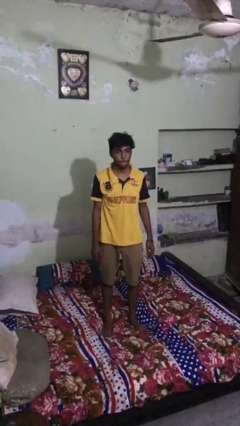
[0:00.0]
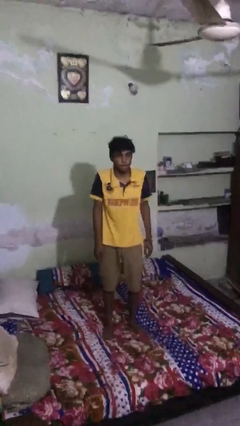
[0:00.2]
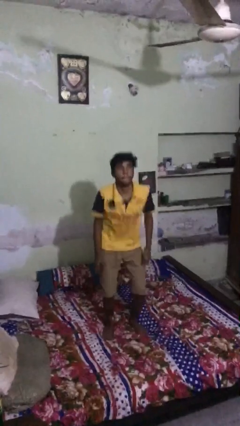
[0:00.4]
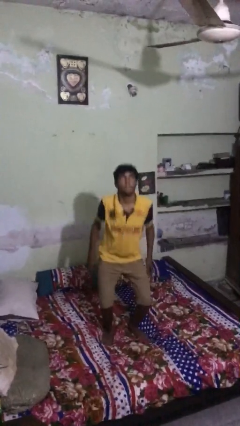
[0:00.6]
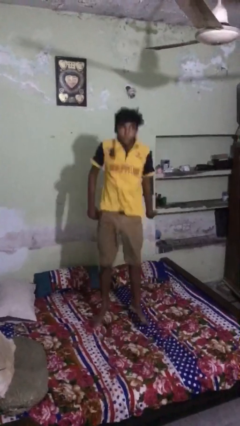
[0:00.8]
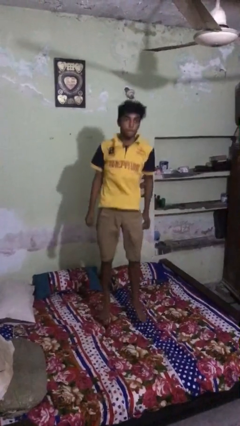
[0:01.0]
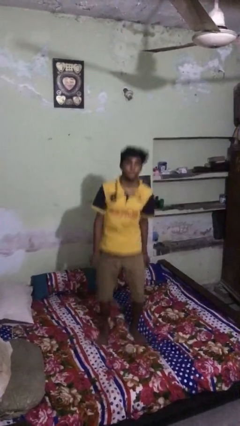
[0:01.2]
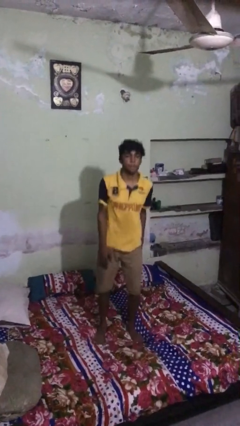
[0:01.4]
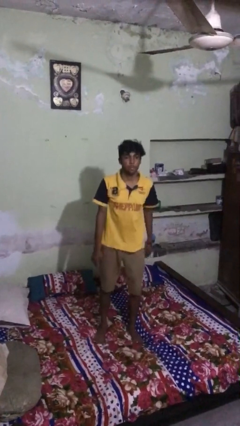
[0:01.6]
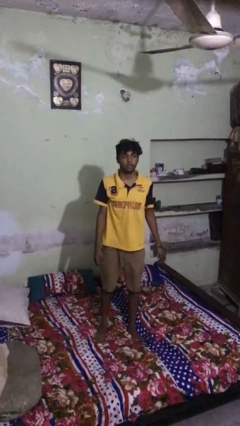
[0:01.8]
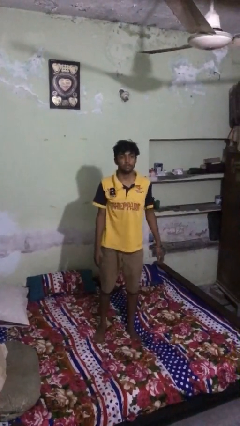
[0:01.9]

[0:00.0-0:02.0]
person jumps on bed

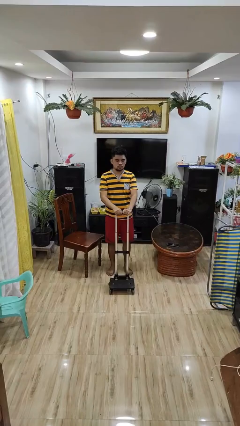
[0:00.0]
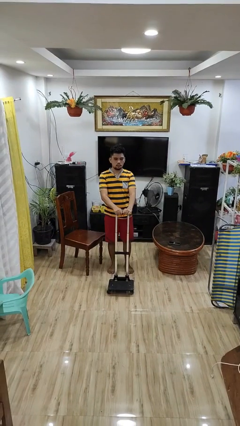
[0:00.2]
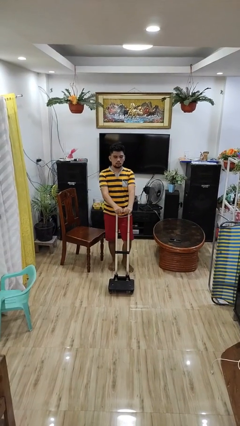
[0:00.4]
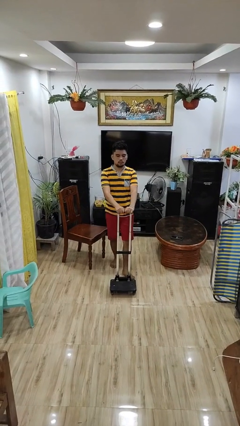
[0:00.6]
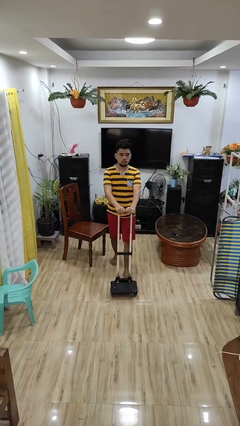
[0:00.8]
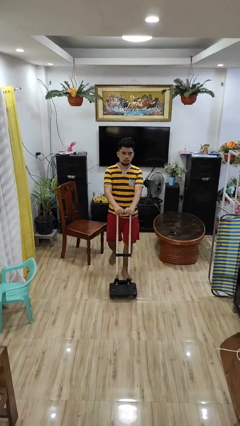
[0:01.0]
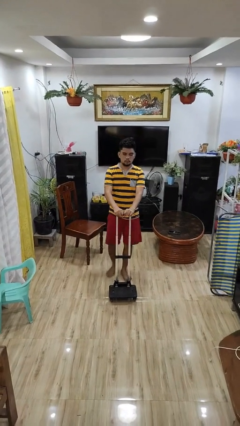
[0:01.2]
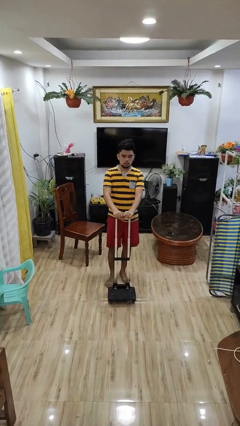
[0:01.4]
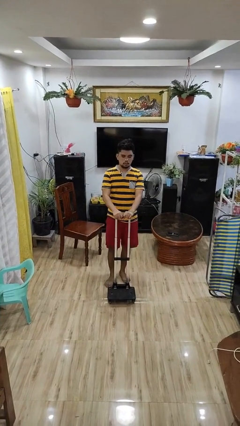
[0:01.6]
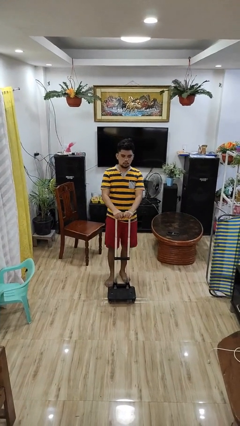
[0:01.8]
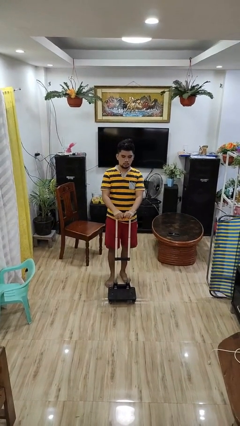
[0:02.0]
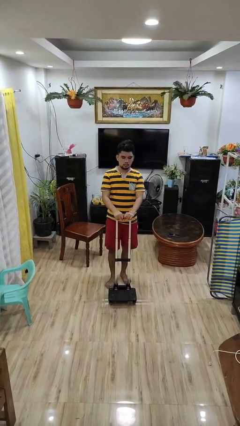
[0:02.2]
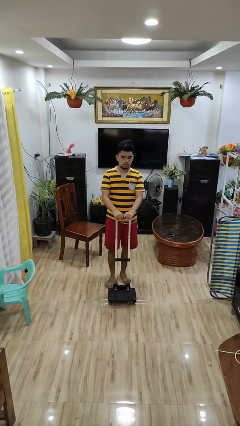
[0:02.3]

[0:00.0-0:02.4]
person pushes wheeled cart

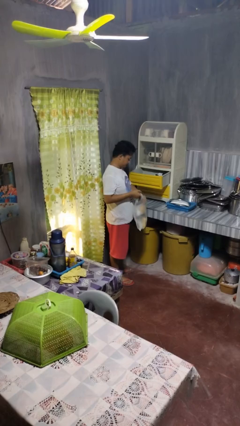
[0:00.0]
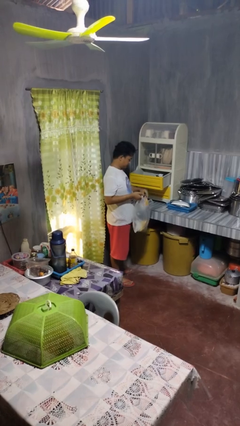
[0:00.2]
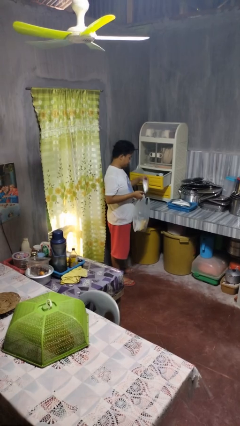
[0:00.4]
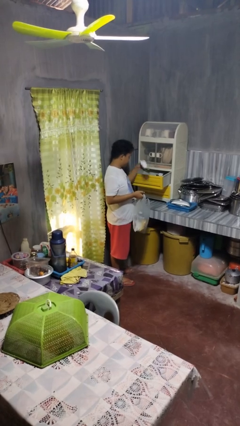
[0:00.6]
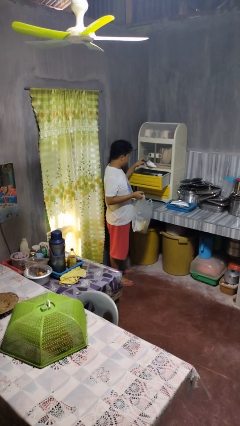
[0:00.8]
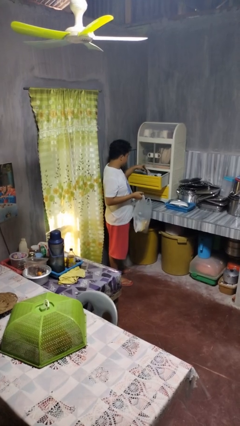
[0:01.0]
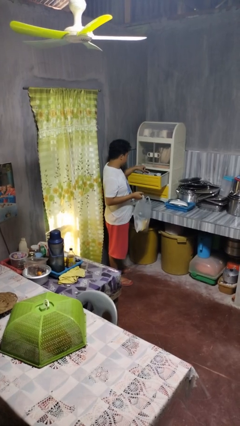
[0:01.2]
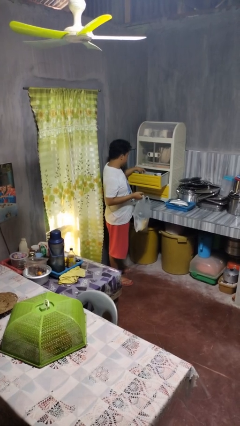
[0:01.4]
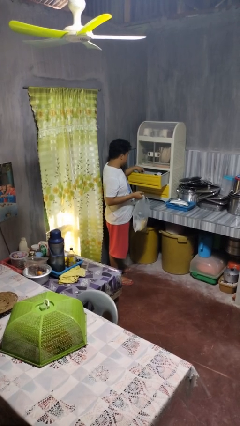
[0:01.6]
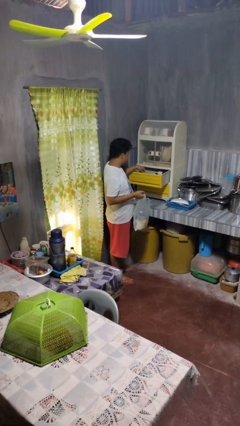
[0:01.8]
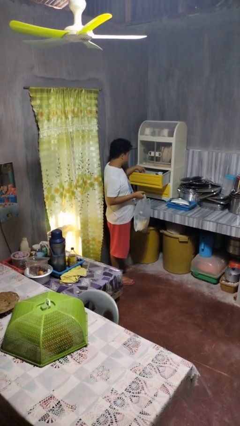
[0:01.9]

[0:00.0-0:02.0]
person loads groceries into cabinet

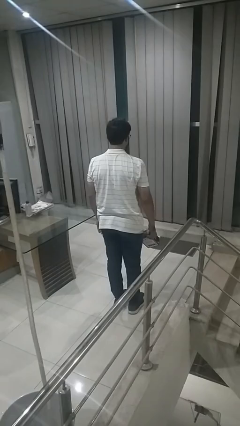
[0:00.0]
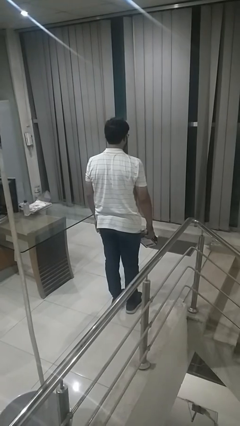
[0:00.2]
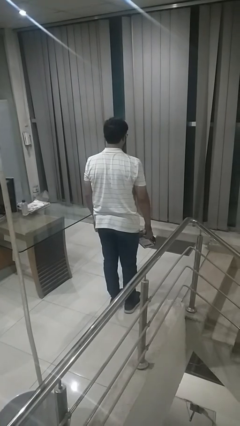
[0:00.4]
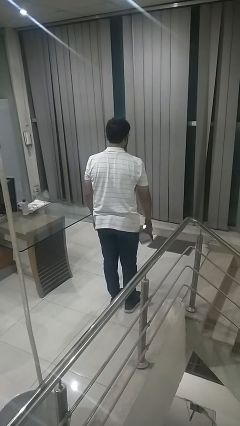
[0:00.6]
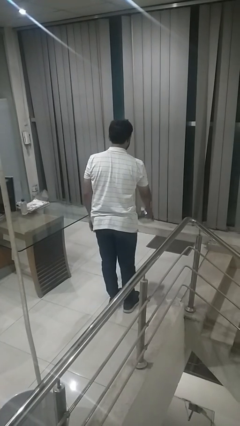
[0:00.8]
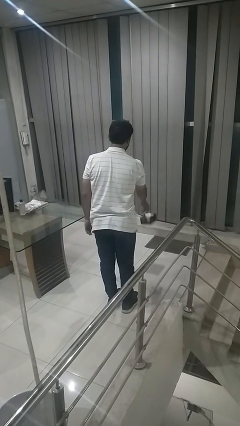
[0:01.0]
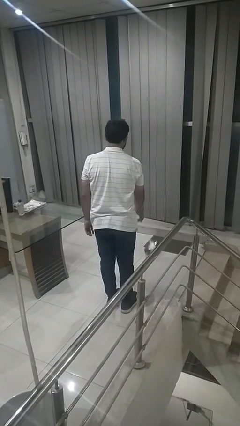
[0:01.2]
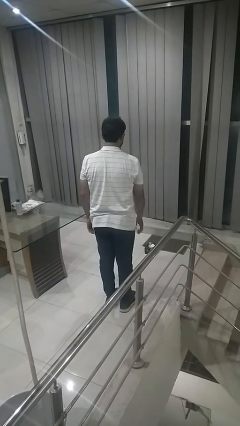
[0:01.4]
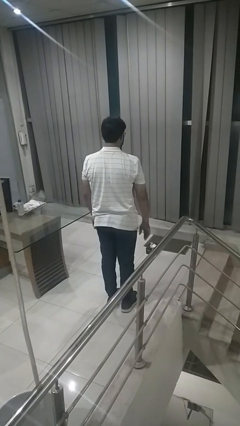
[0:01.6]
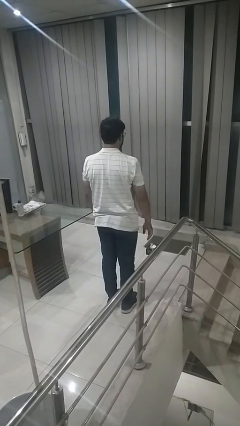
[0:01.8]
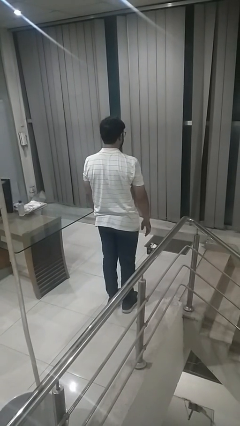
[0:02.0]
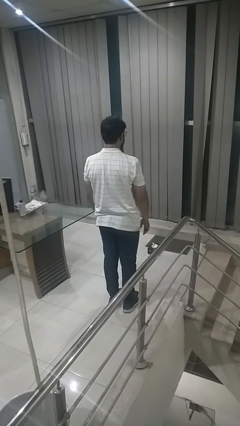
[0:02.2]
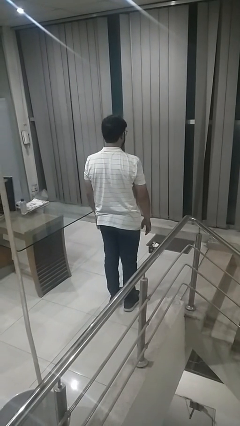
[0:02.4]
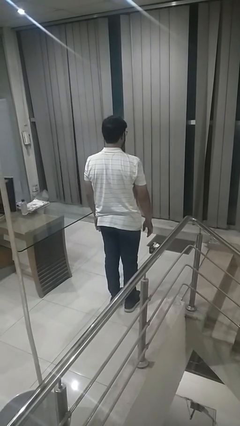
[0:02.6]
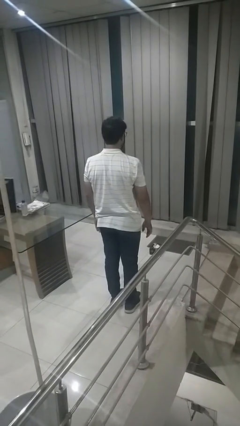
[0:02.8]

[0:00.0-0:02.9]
person throws object to ground

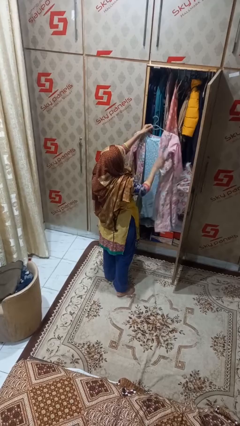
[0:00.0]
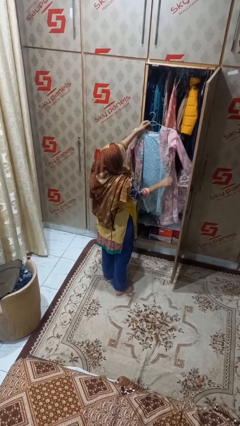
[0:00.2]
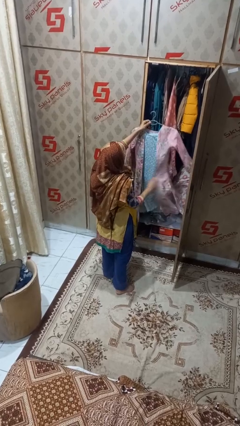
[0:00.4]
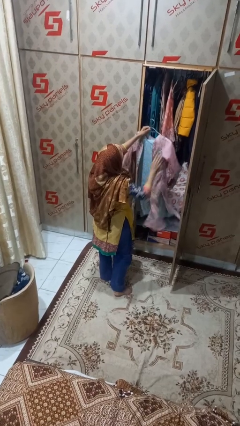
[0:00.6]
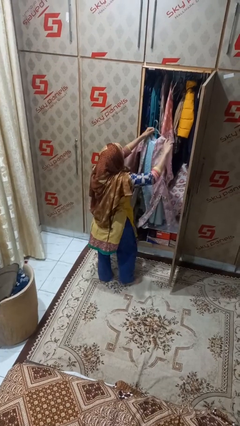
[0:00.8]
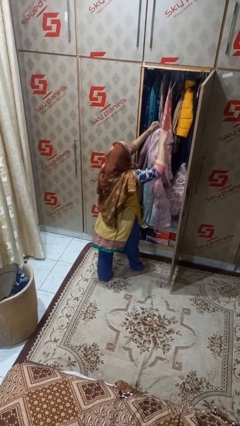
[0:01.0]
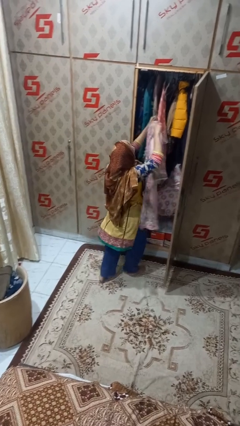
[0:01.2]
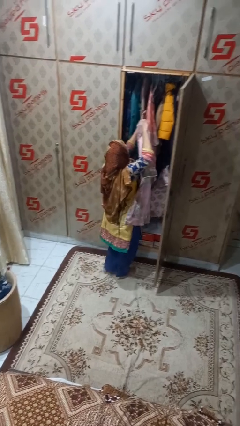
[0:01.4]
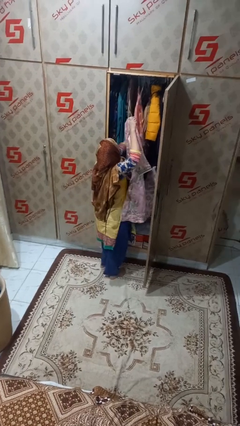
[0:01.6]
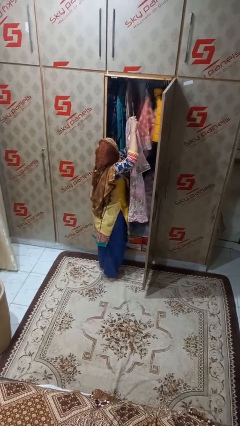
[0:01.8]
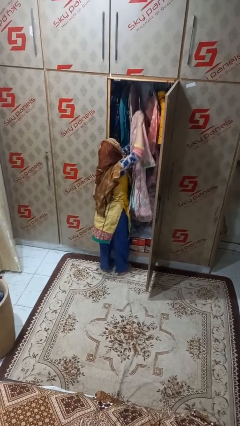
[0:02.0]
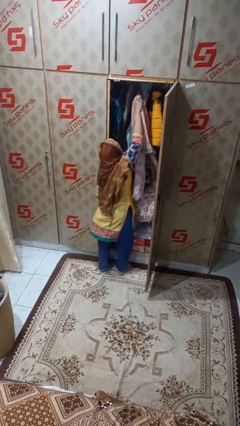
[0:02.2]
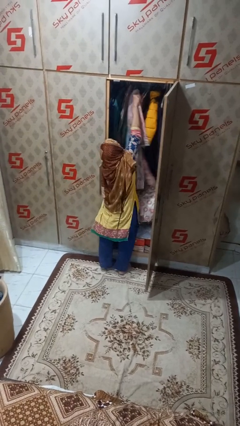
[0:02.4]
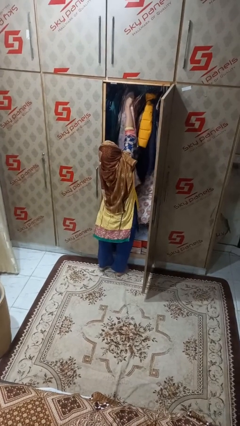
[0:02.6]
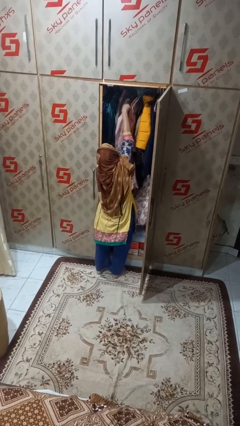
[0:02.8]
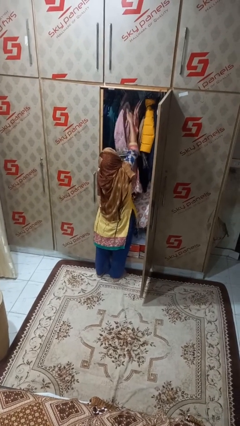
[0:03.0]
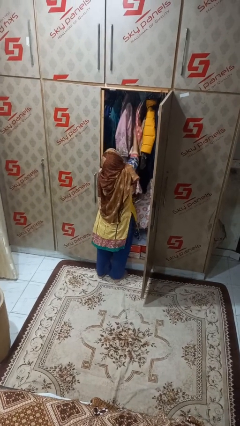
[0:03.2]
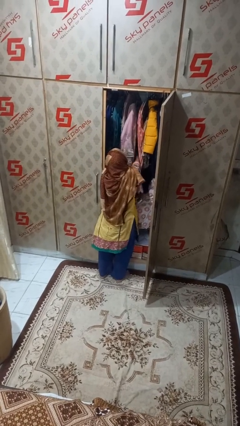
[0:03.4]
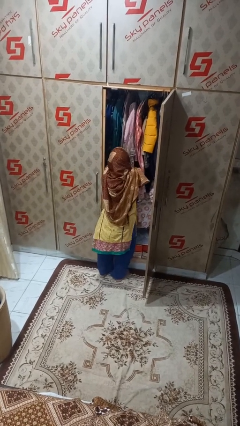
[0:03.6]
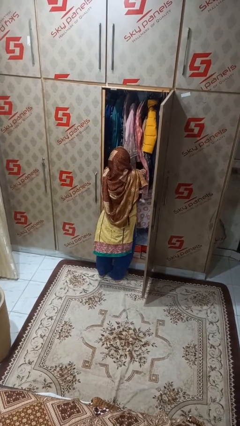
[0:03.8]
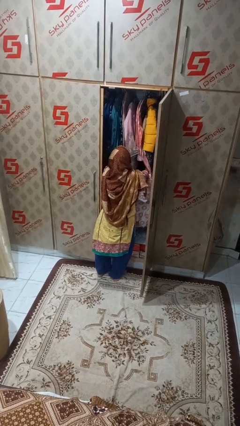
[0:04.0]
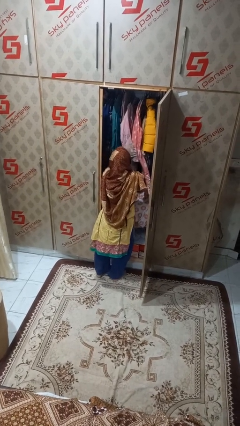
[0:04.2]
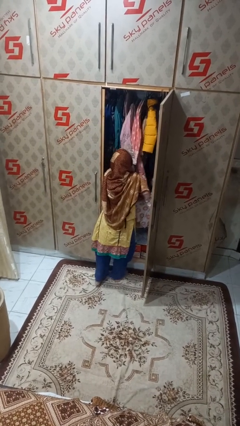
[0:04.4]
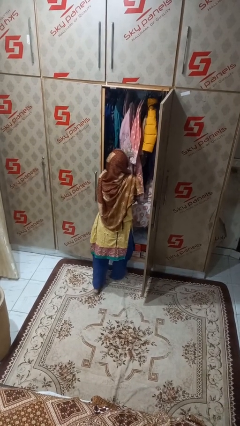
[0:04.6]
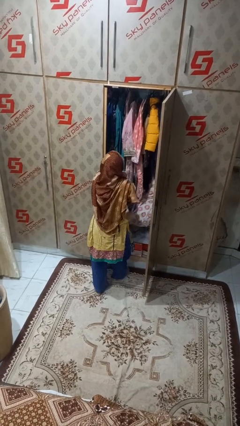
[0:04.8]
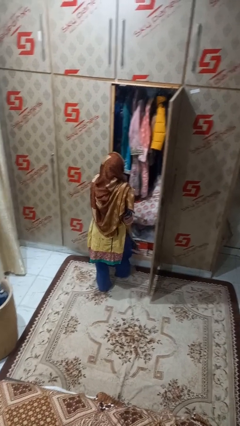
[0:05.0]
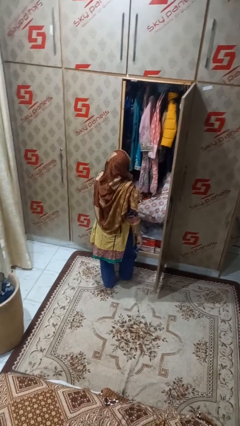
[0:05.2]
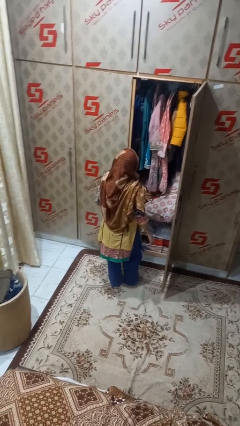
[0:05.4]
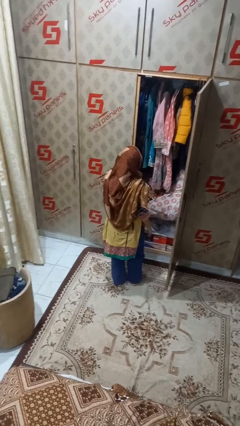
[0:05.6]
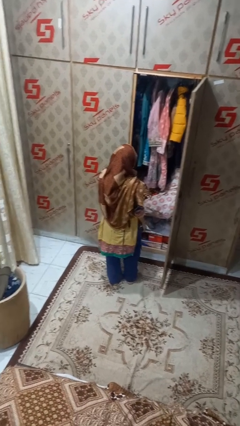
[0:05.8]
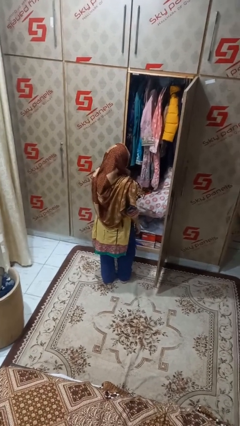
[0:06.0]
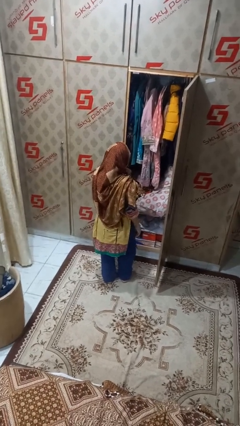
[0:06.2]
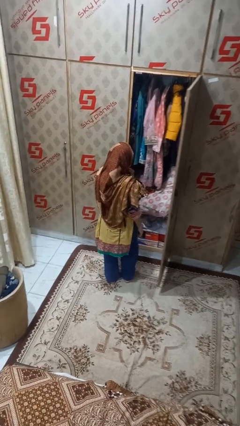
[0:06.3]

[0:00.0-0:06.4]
person puts clothes into closet

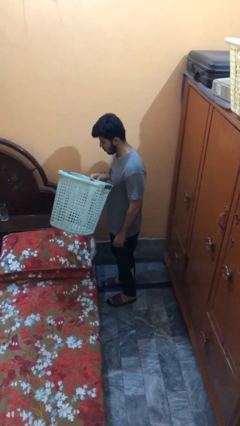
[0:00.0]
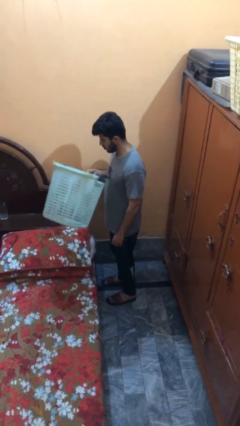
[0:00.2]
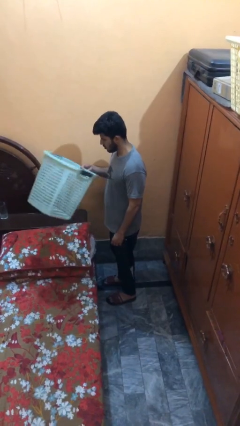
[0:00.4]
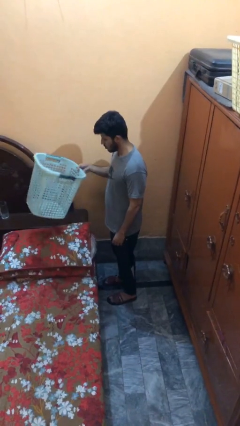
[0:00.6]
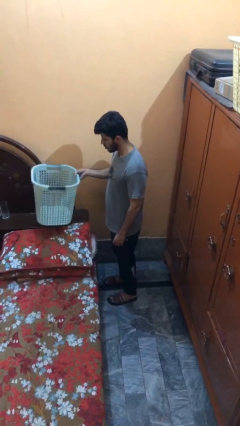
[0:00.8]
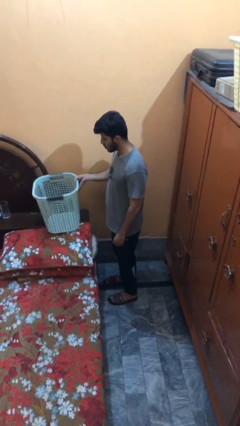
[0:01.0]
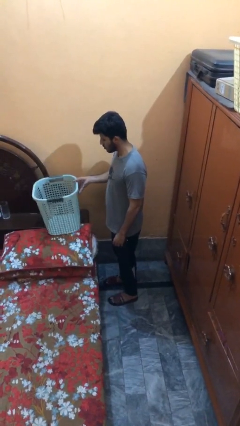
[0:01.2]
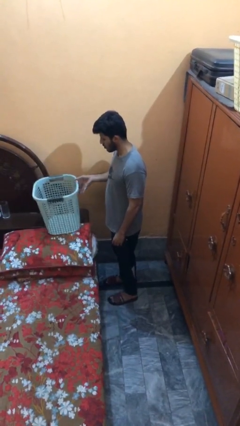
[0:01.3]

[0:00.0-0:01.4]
person puts down object on bed

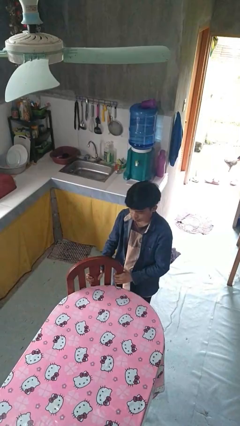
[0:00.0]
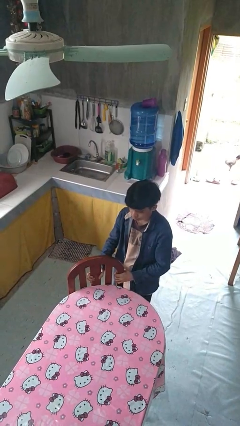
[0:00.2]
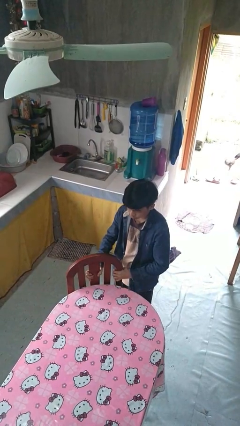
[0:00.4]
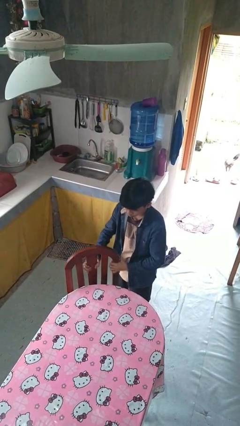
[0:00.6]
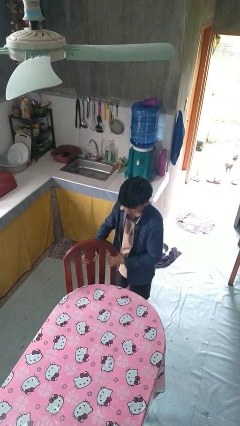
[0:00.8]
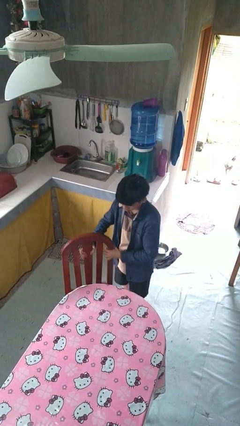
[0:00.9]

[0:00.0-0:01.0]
person pulls out chair
